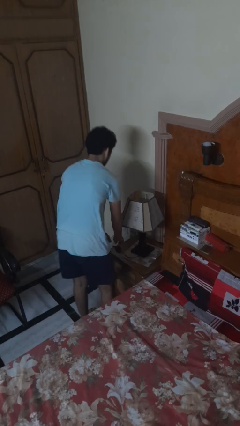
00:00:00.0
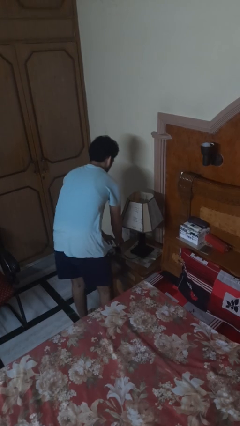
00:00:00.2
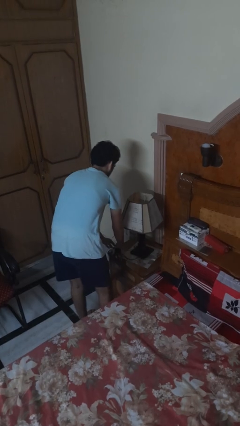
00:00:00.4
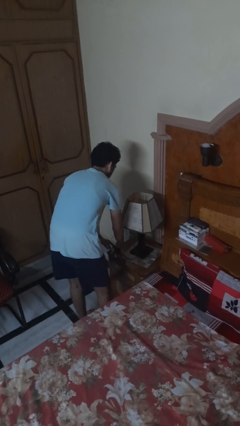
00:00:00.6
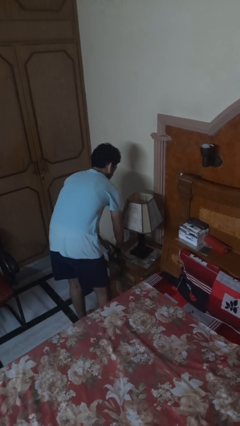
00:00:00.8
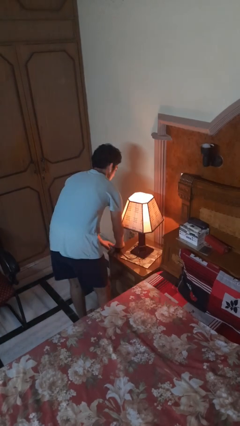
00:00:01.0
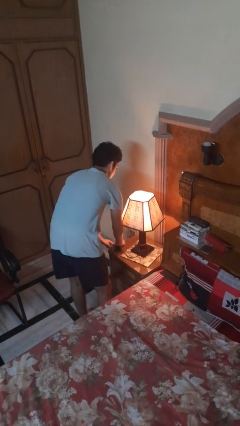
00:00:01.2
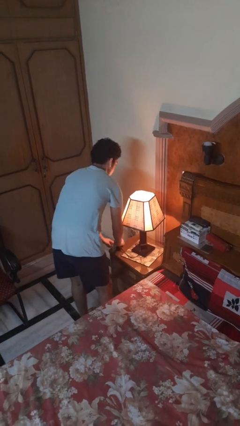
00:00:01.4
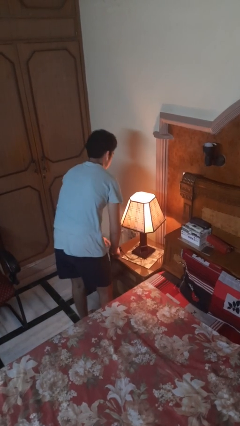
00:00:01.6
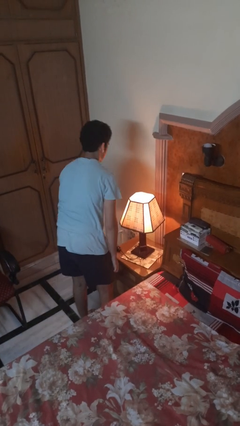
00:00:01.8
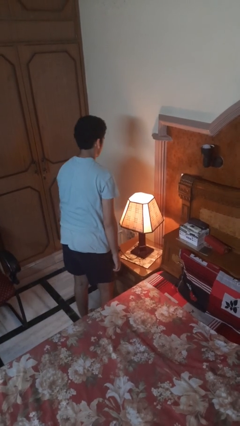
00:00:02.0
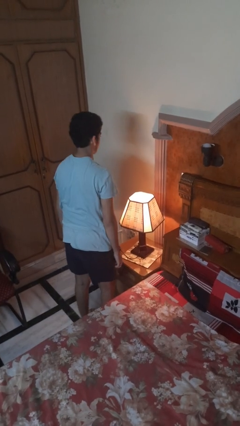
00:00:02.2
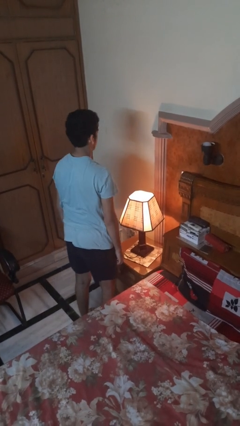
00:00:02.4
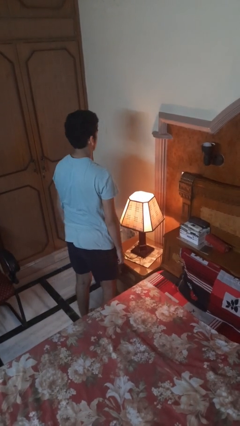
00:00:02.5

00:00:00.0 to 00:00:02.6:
person turns on lamp

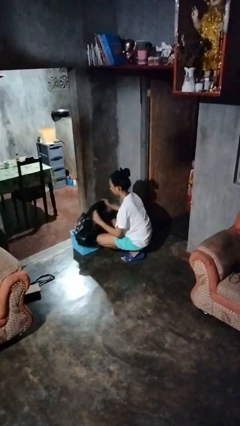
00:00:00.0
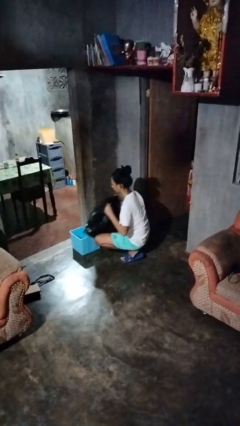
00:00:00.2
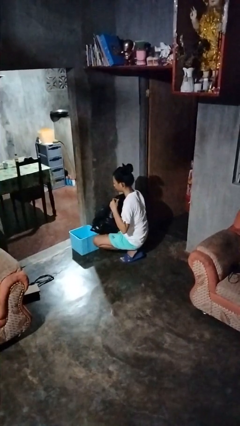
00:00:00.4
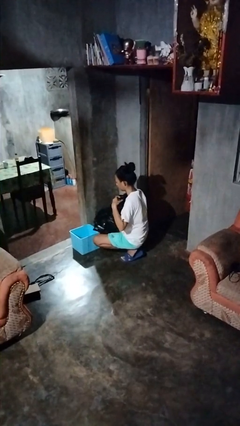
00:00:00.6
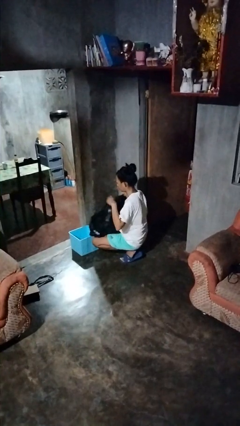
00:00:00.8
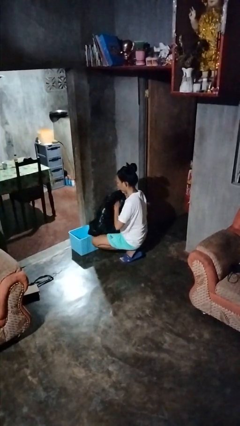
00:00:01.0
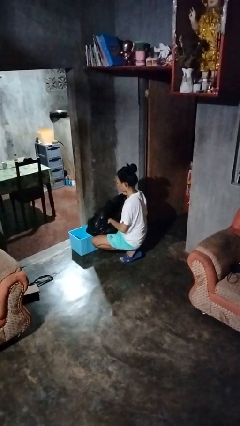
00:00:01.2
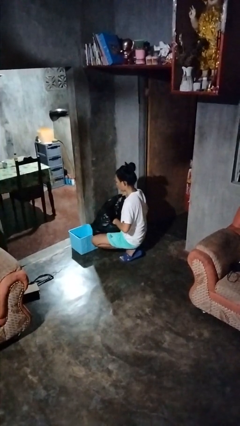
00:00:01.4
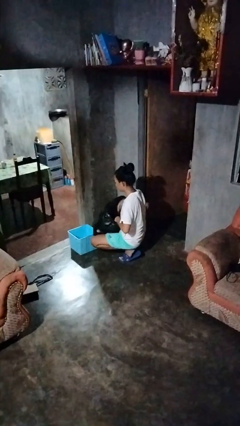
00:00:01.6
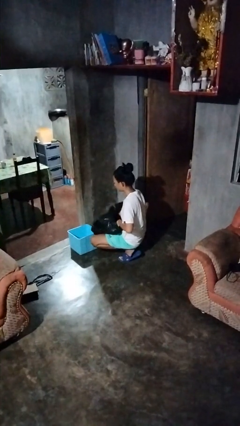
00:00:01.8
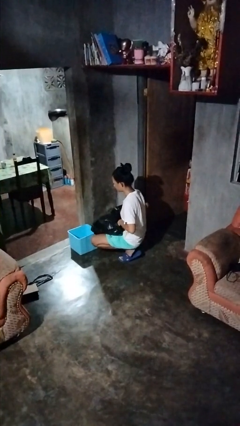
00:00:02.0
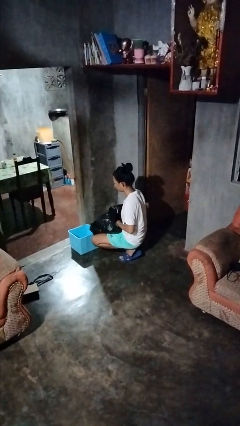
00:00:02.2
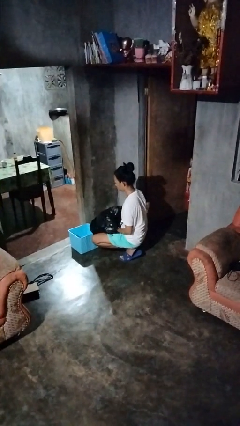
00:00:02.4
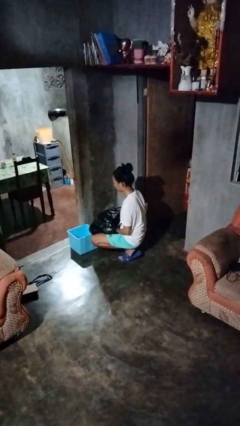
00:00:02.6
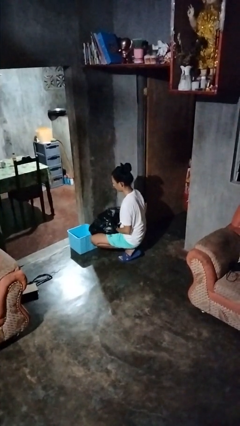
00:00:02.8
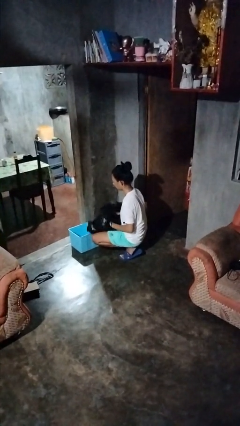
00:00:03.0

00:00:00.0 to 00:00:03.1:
person removes trashbag from trashcan

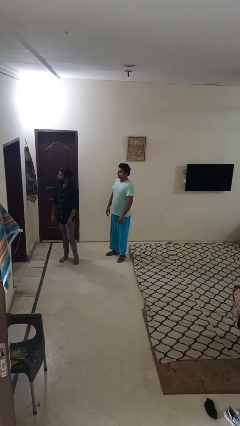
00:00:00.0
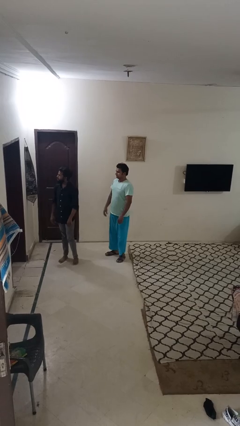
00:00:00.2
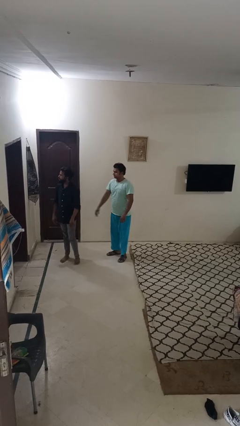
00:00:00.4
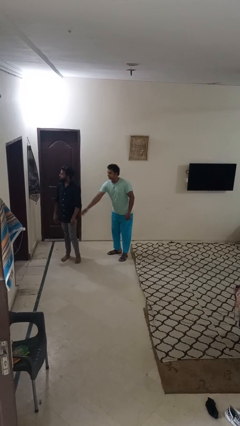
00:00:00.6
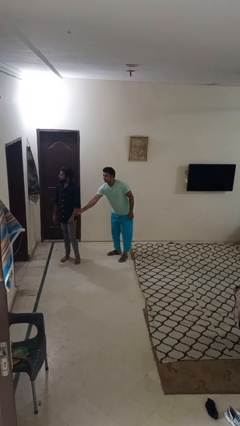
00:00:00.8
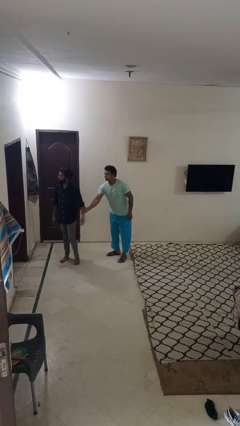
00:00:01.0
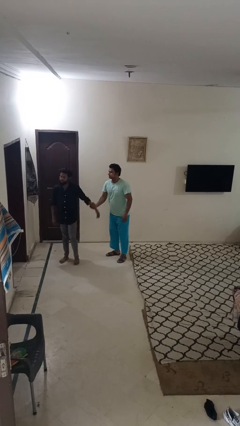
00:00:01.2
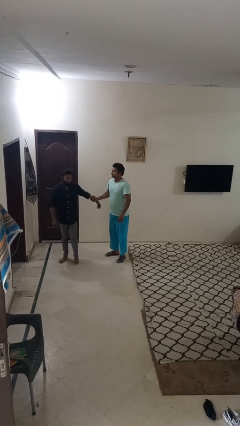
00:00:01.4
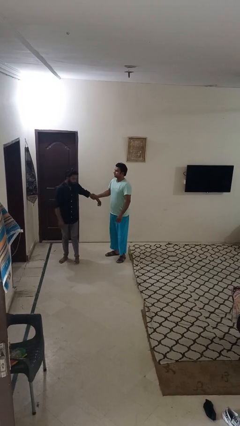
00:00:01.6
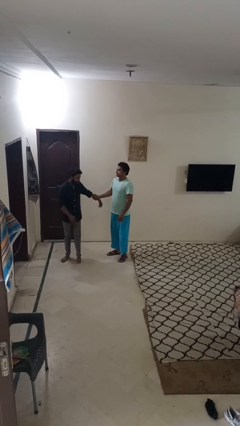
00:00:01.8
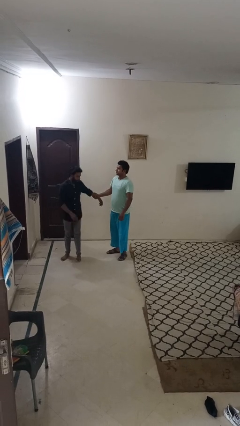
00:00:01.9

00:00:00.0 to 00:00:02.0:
person grabs person by forearm

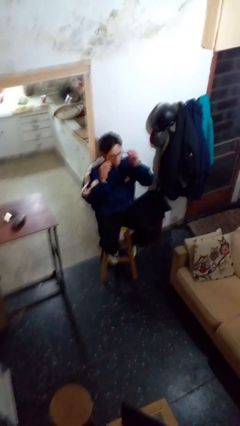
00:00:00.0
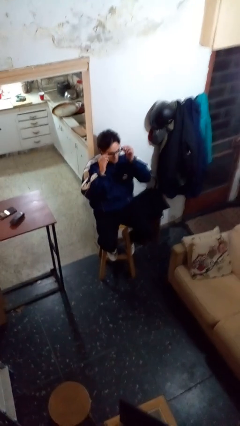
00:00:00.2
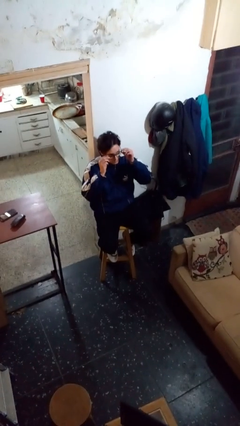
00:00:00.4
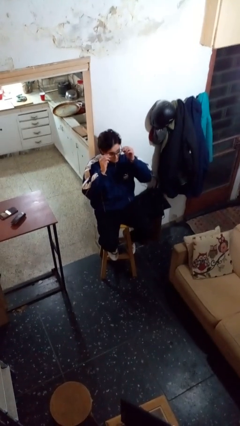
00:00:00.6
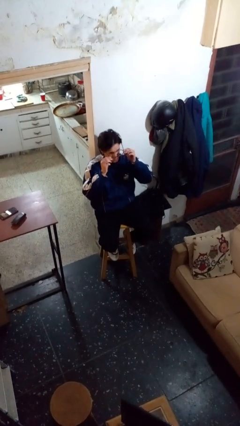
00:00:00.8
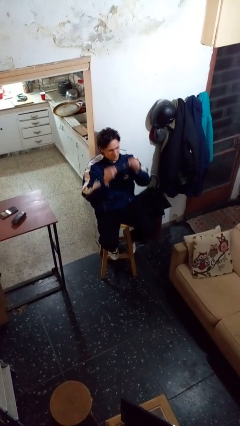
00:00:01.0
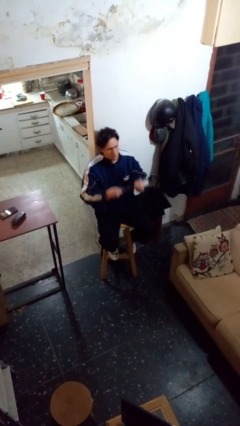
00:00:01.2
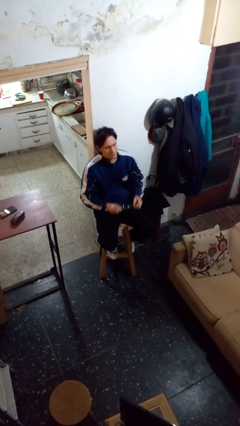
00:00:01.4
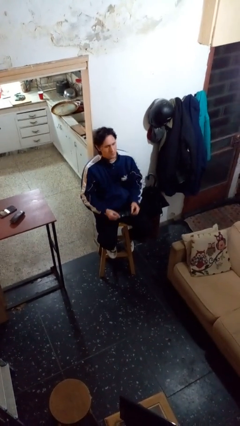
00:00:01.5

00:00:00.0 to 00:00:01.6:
person takes off glasses

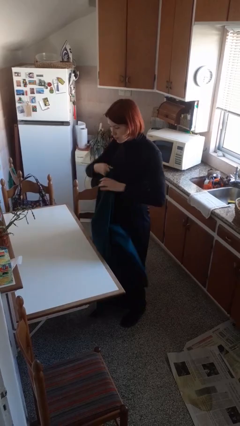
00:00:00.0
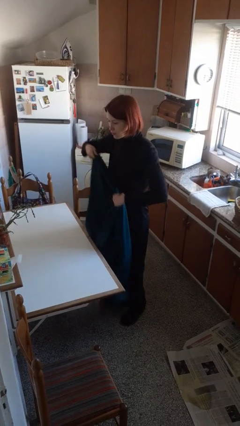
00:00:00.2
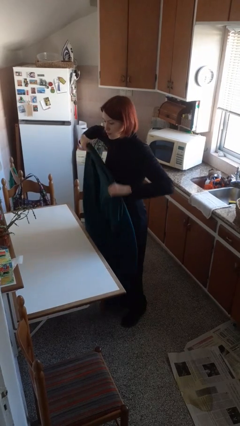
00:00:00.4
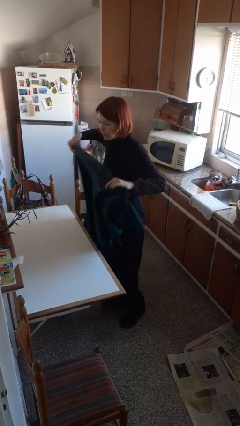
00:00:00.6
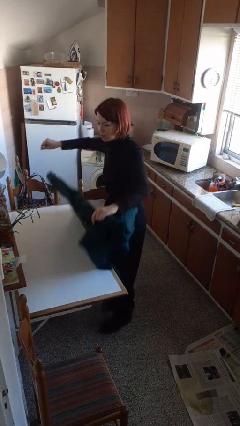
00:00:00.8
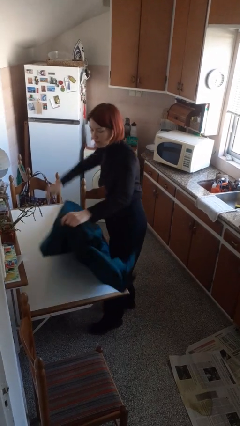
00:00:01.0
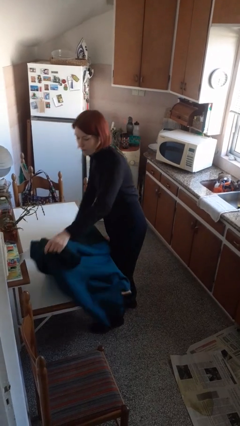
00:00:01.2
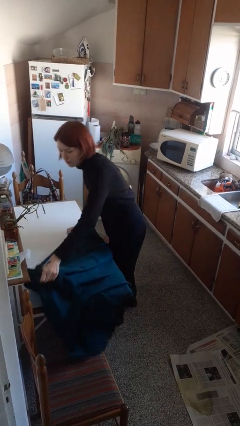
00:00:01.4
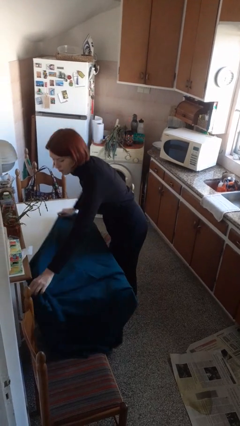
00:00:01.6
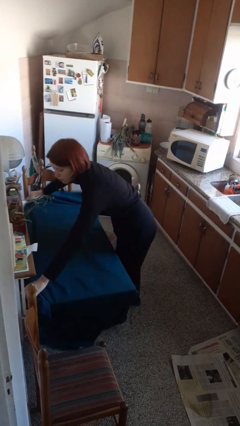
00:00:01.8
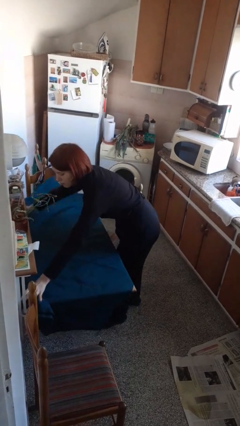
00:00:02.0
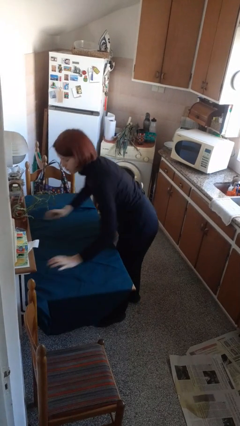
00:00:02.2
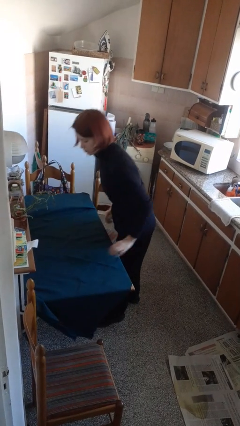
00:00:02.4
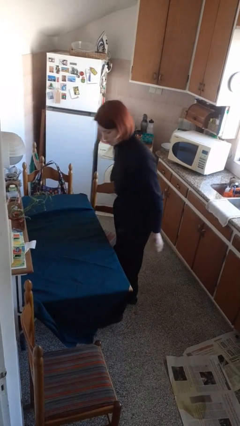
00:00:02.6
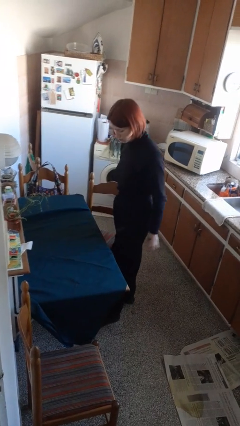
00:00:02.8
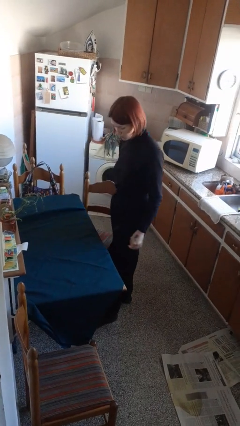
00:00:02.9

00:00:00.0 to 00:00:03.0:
person spreads tablecloth

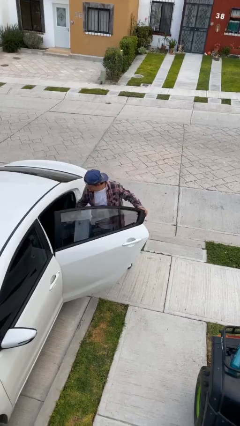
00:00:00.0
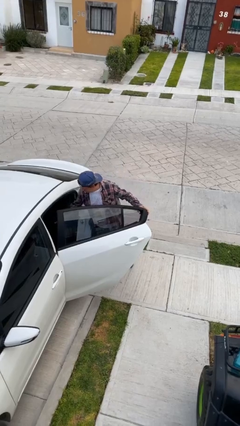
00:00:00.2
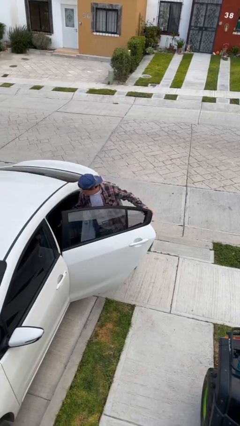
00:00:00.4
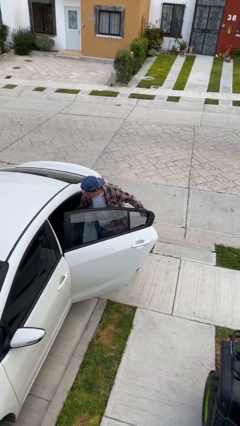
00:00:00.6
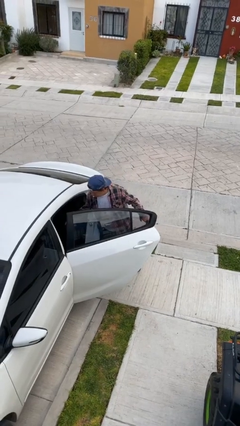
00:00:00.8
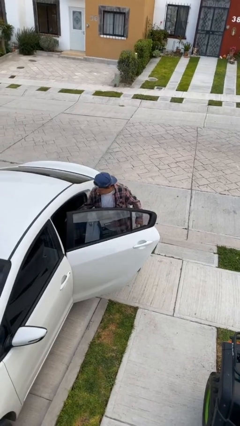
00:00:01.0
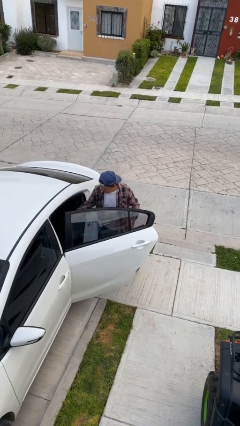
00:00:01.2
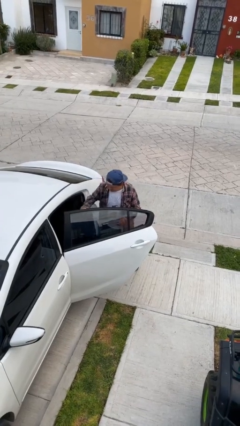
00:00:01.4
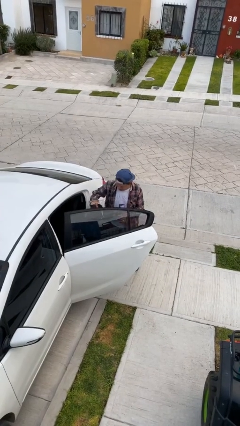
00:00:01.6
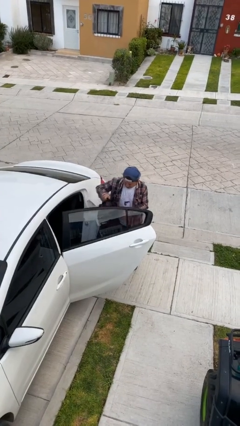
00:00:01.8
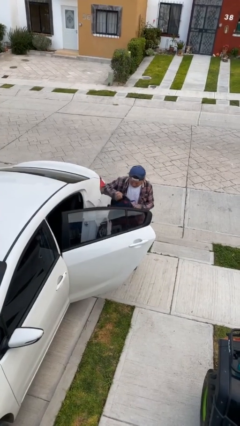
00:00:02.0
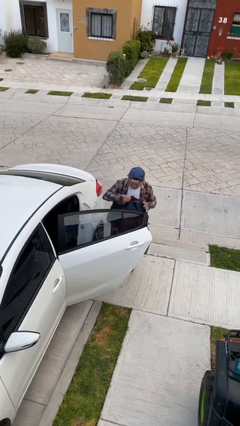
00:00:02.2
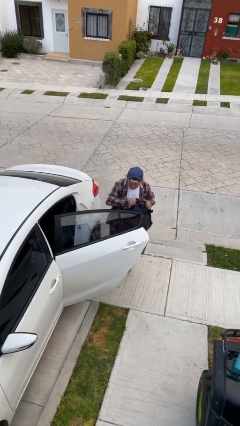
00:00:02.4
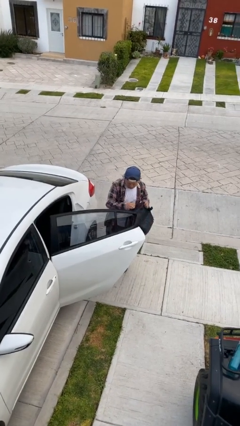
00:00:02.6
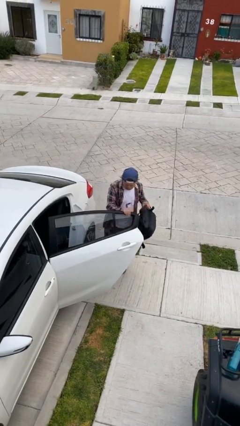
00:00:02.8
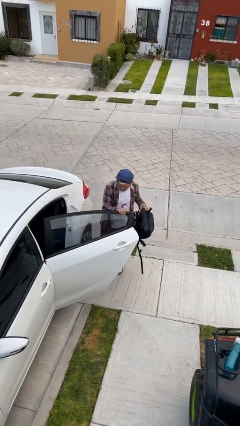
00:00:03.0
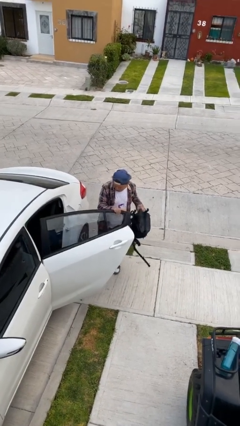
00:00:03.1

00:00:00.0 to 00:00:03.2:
person unloads car

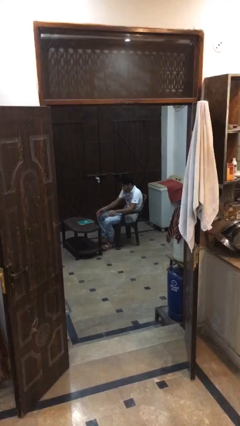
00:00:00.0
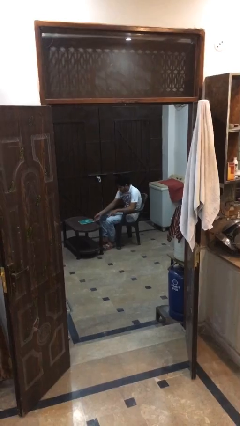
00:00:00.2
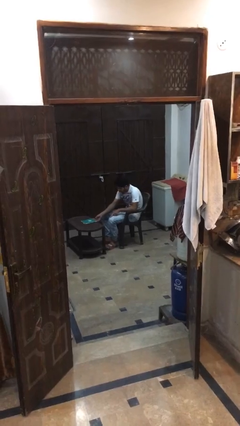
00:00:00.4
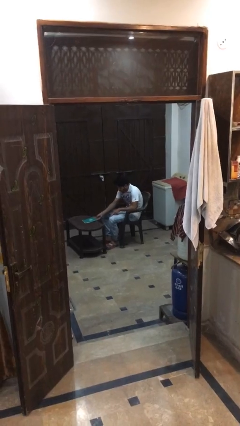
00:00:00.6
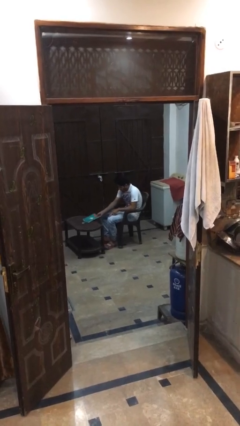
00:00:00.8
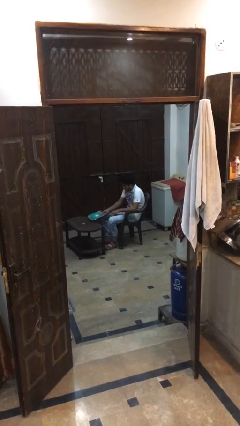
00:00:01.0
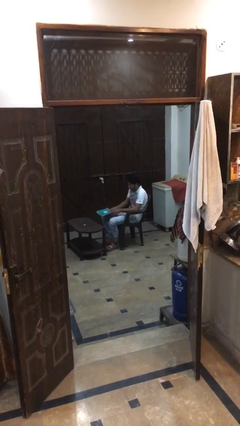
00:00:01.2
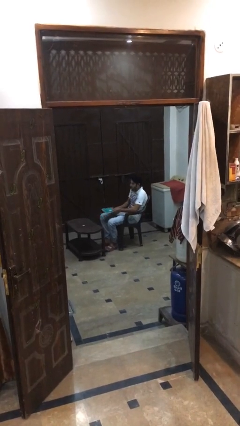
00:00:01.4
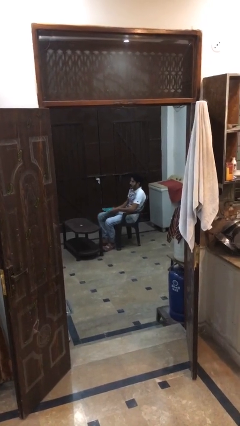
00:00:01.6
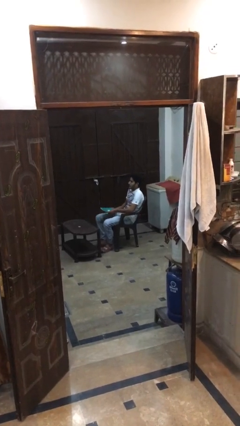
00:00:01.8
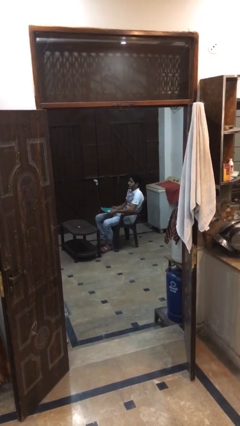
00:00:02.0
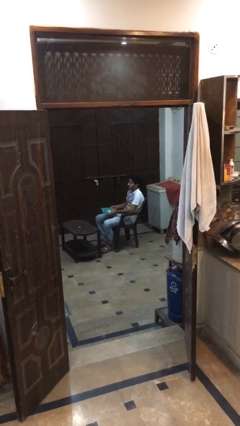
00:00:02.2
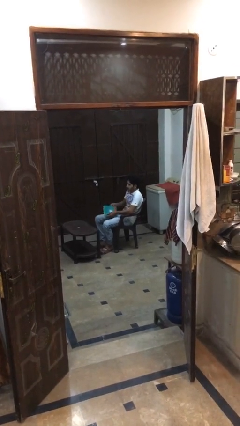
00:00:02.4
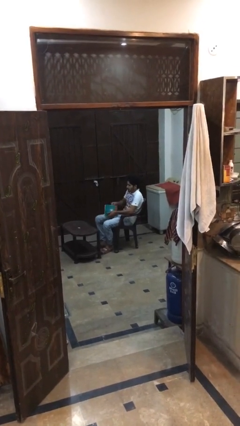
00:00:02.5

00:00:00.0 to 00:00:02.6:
person picks up object from table
